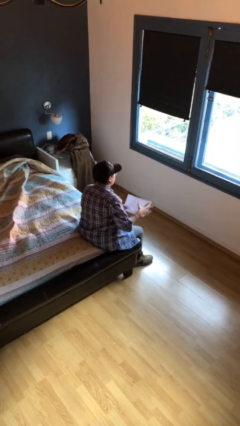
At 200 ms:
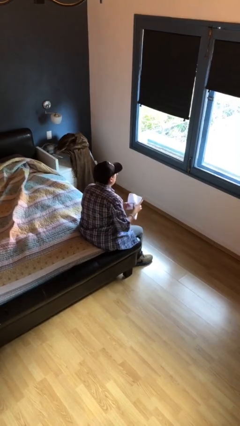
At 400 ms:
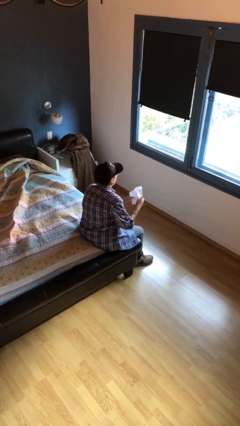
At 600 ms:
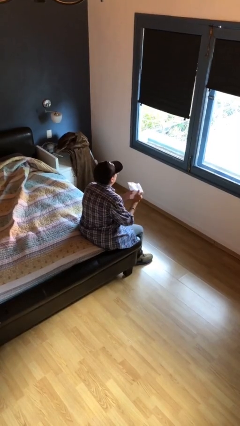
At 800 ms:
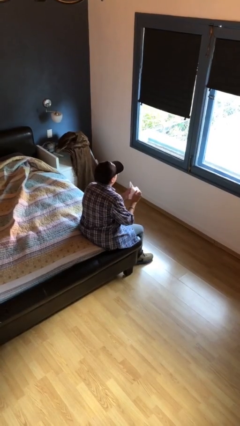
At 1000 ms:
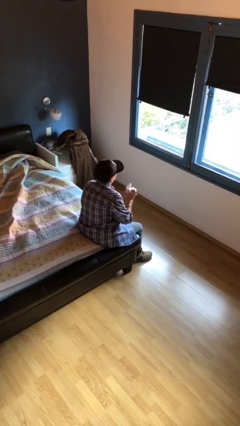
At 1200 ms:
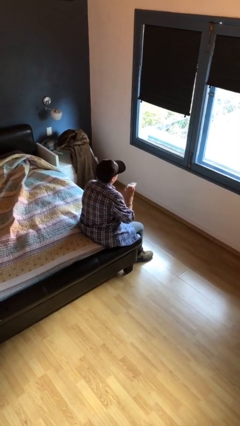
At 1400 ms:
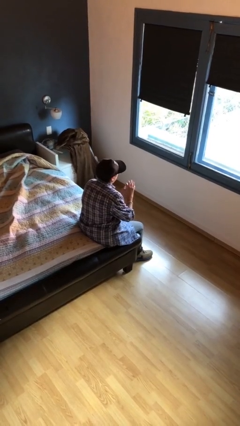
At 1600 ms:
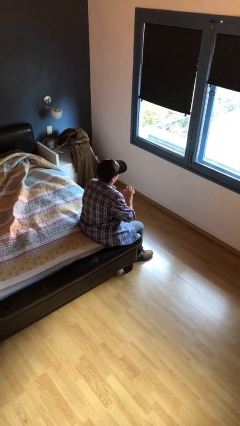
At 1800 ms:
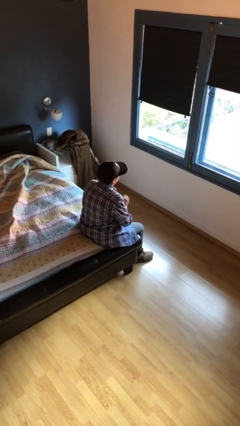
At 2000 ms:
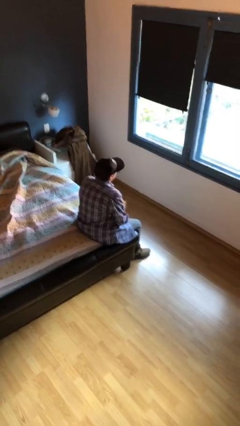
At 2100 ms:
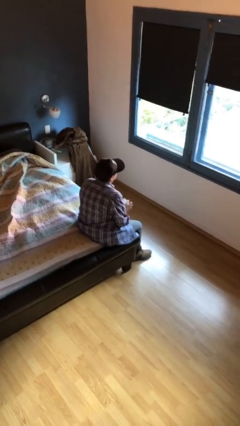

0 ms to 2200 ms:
person crumples paper

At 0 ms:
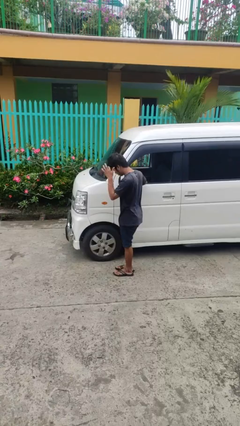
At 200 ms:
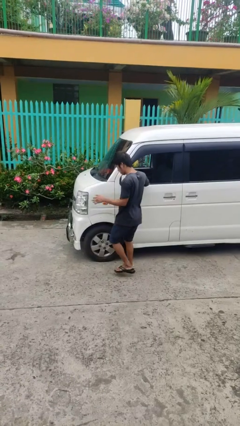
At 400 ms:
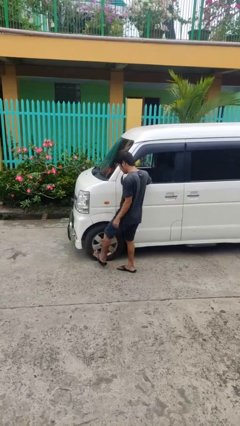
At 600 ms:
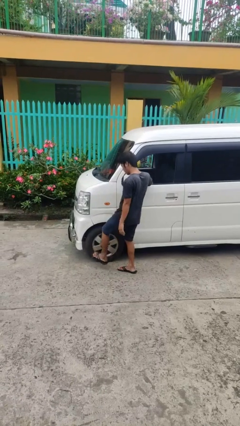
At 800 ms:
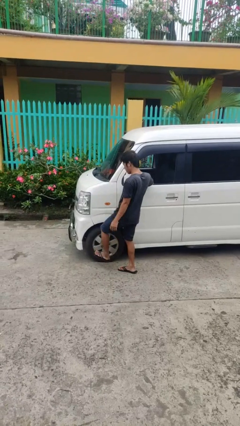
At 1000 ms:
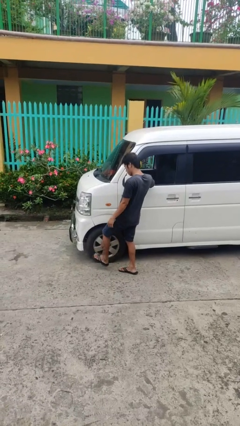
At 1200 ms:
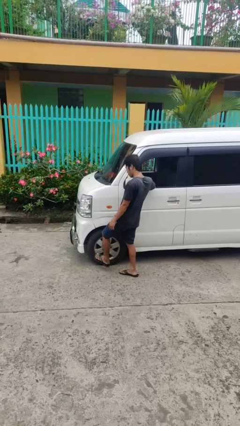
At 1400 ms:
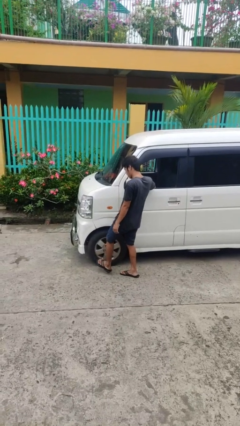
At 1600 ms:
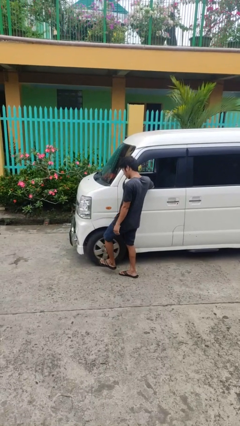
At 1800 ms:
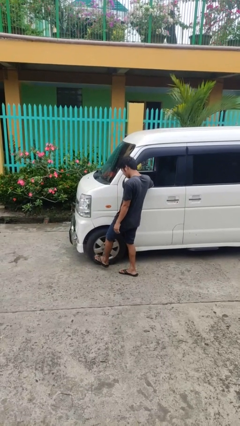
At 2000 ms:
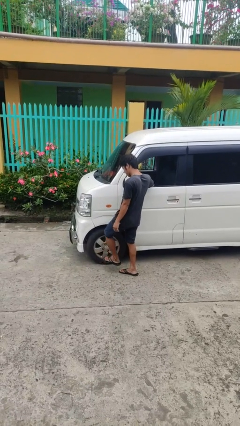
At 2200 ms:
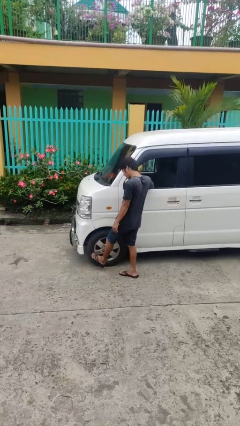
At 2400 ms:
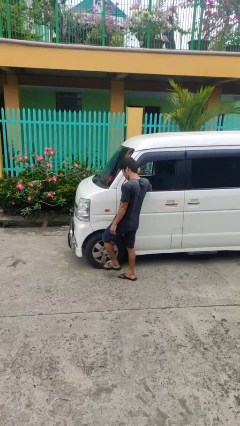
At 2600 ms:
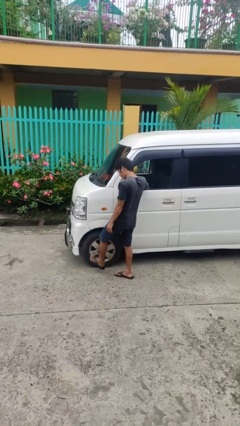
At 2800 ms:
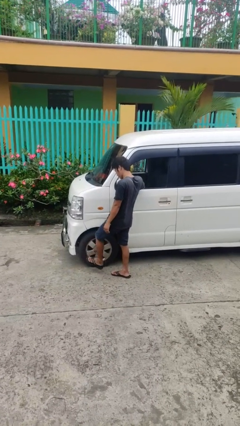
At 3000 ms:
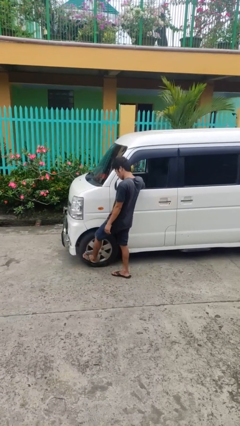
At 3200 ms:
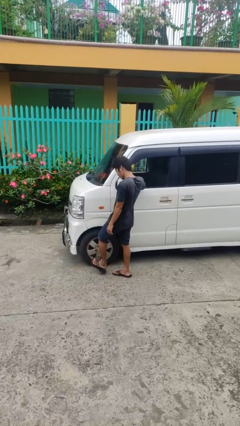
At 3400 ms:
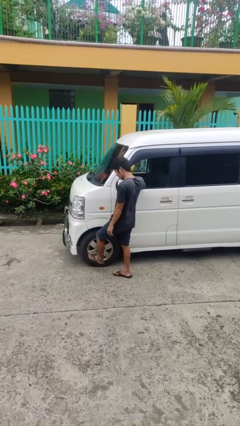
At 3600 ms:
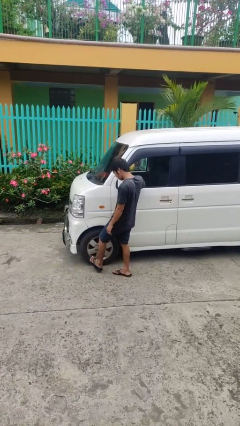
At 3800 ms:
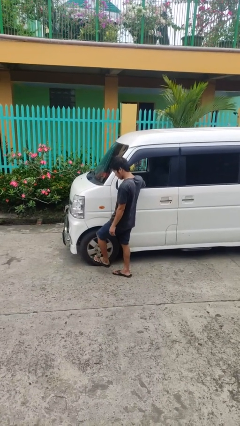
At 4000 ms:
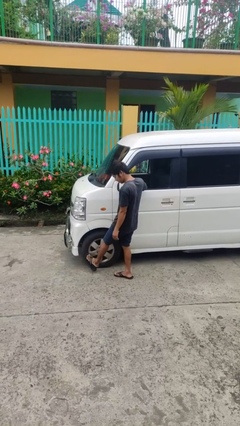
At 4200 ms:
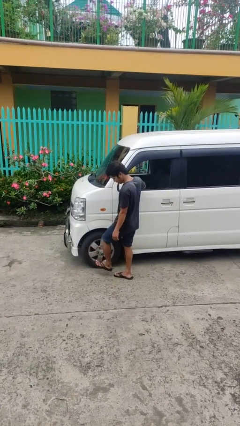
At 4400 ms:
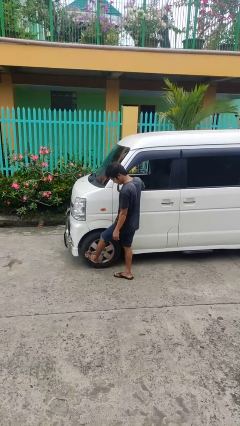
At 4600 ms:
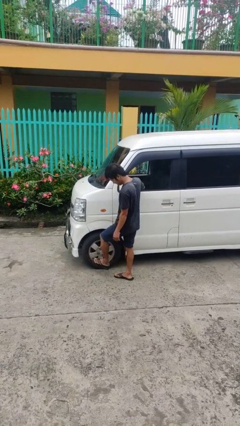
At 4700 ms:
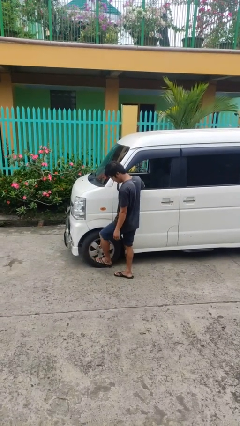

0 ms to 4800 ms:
person kicks car tires

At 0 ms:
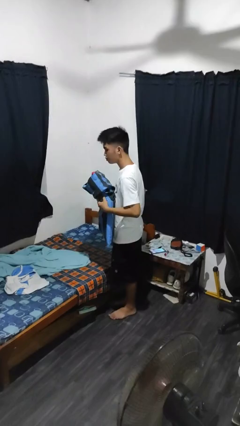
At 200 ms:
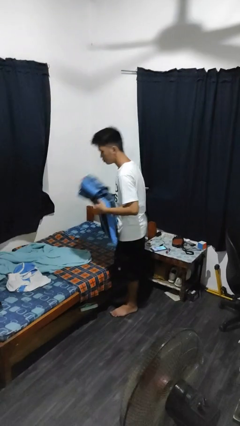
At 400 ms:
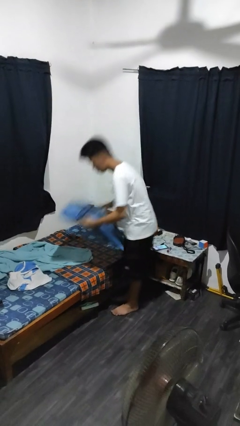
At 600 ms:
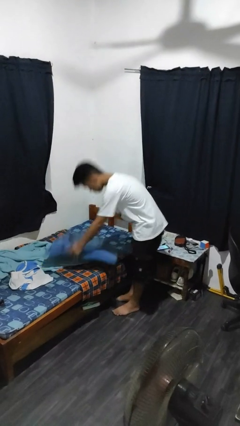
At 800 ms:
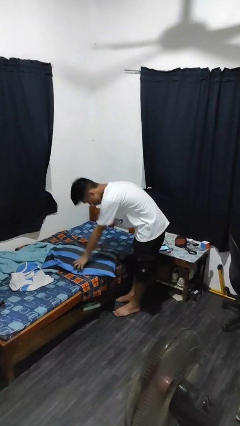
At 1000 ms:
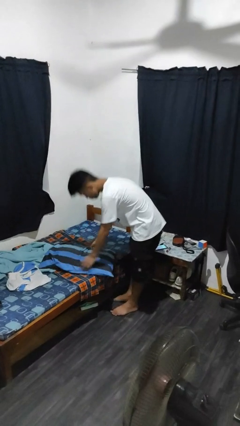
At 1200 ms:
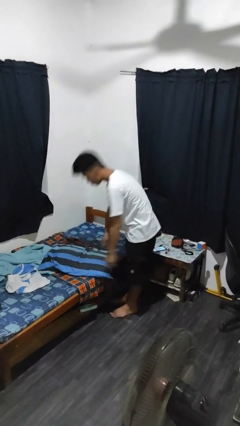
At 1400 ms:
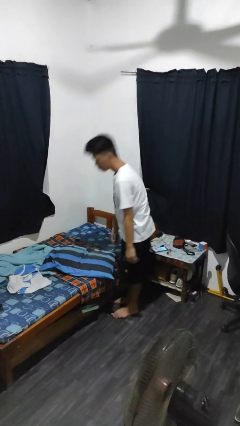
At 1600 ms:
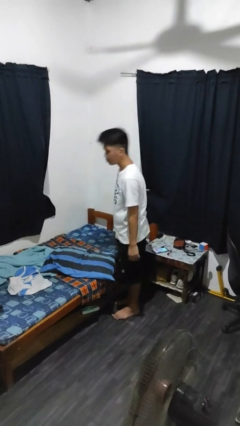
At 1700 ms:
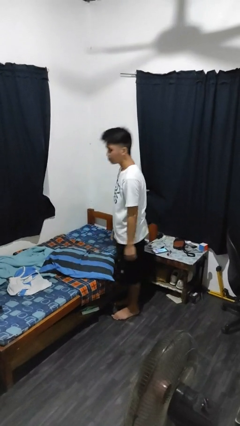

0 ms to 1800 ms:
person puts down object on bed

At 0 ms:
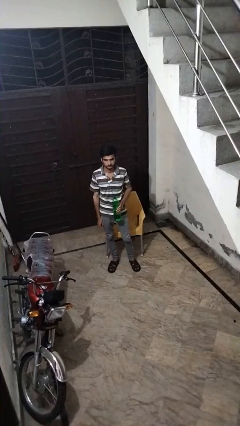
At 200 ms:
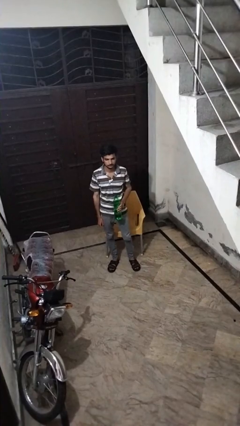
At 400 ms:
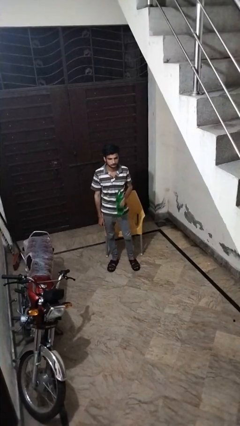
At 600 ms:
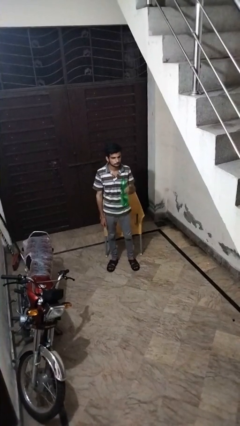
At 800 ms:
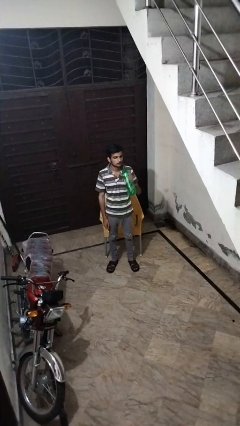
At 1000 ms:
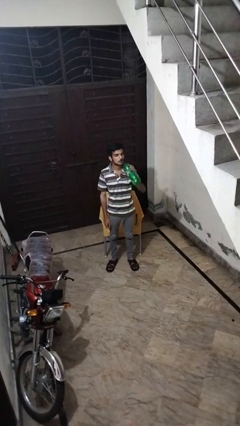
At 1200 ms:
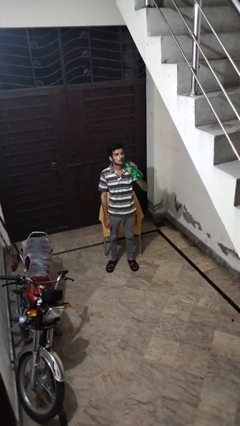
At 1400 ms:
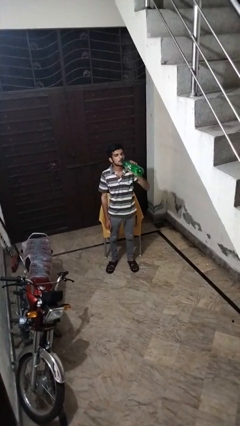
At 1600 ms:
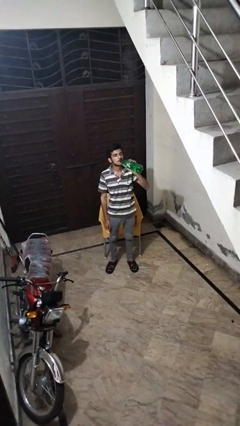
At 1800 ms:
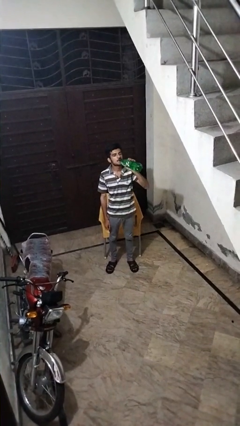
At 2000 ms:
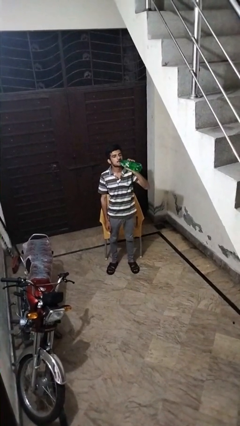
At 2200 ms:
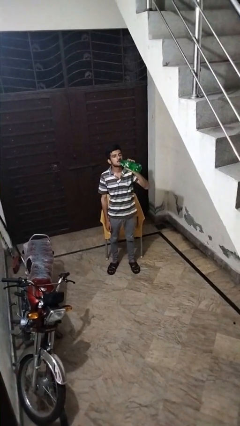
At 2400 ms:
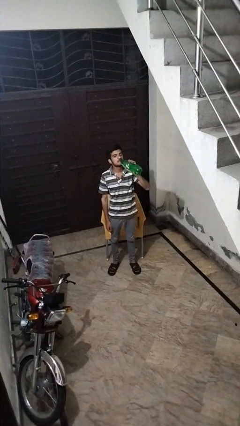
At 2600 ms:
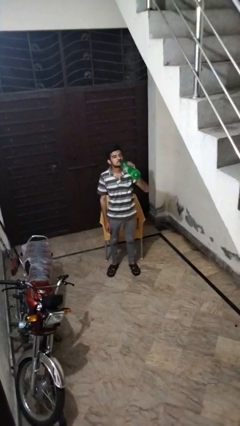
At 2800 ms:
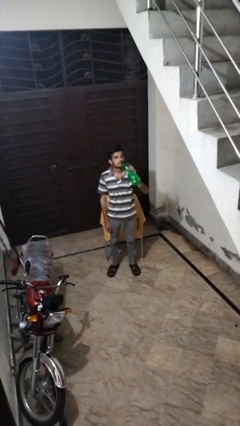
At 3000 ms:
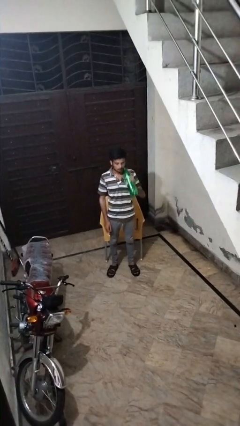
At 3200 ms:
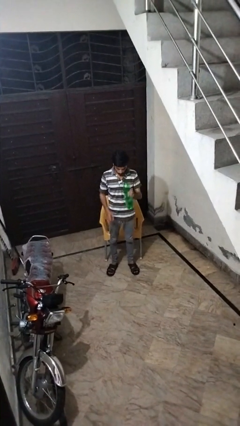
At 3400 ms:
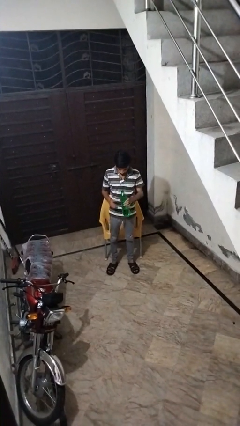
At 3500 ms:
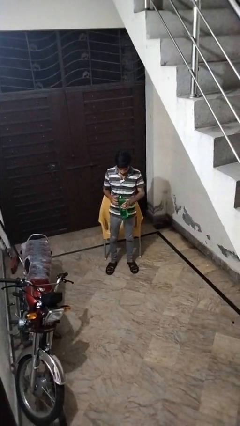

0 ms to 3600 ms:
person drinks from bottle

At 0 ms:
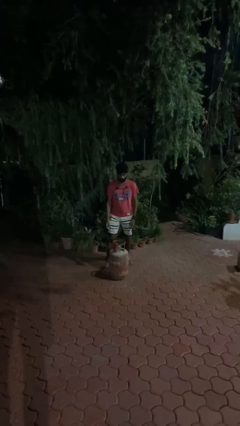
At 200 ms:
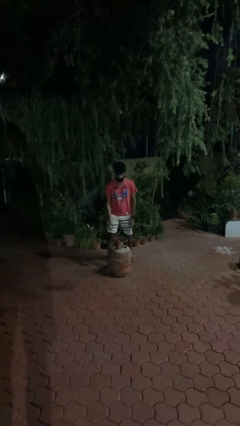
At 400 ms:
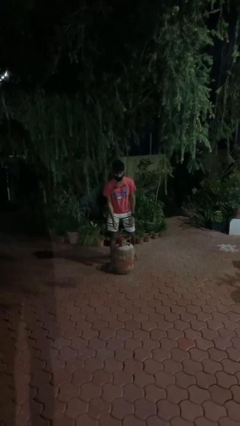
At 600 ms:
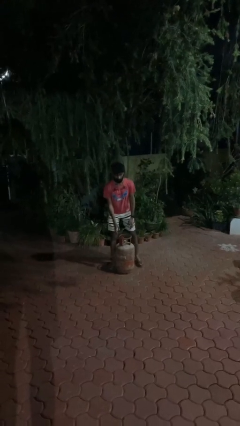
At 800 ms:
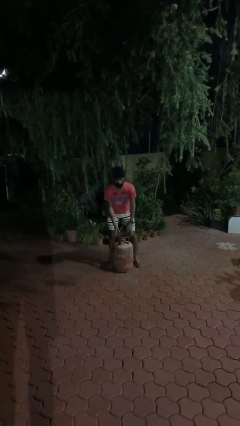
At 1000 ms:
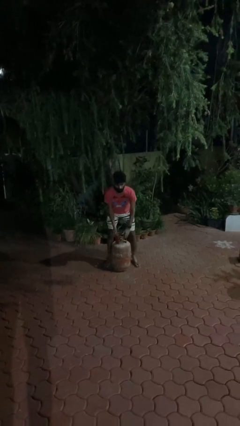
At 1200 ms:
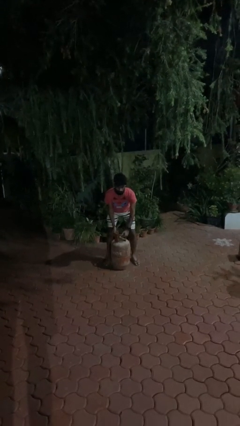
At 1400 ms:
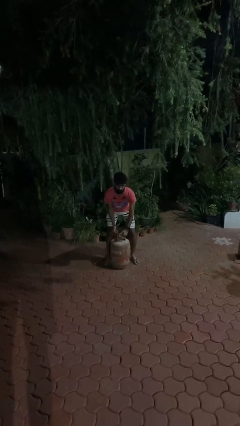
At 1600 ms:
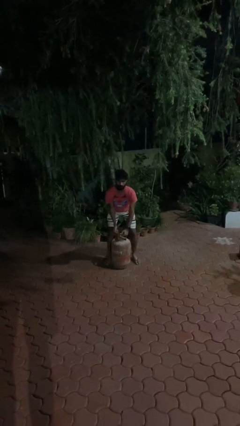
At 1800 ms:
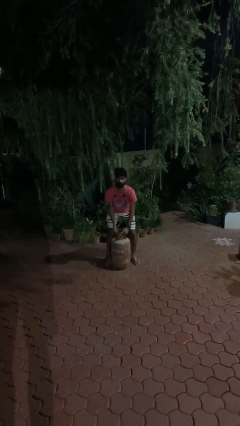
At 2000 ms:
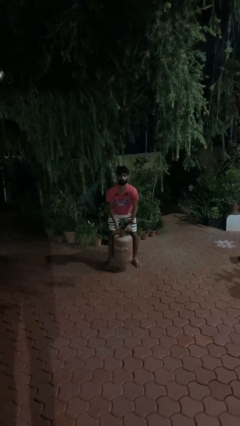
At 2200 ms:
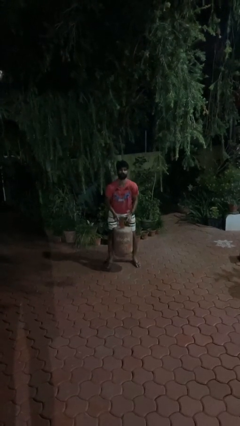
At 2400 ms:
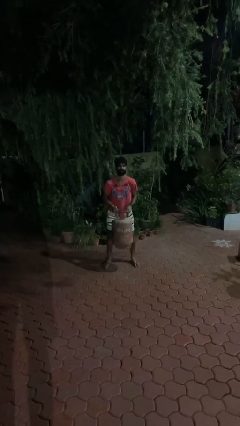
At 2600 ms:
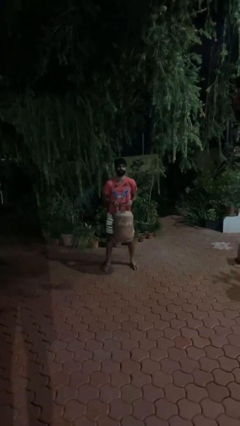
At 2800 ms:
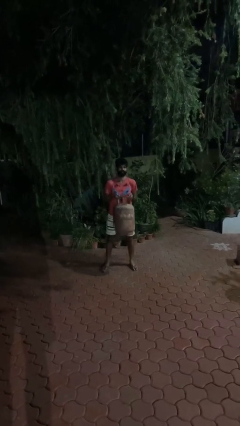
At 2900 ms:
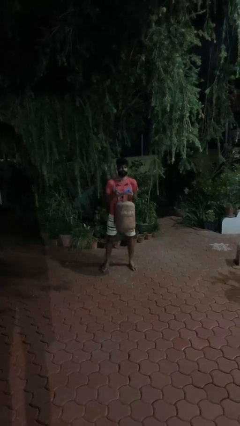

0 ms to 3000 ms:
person picks up object from floor

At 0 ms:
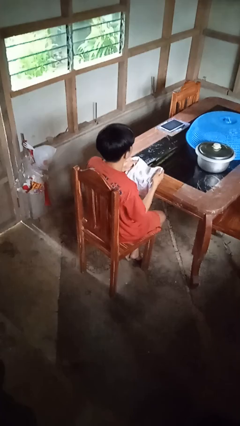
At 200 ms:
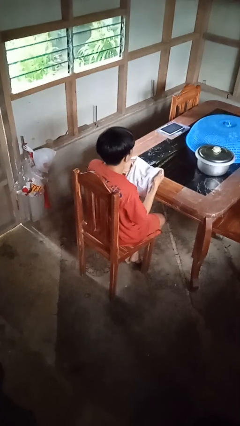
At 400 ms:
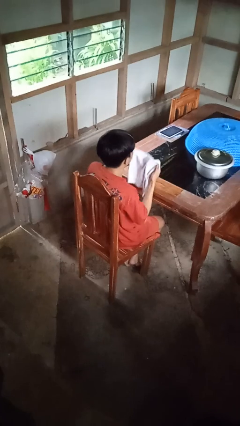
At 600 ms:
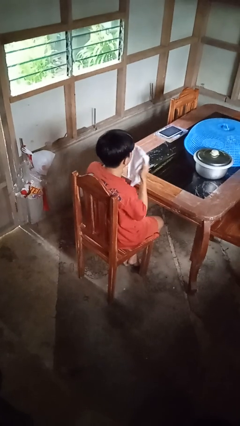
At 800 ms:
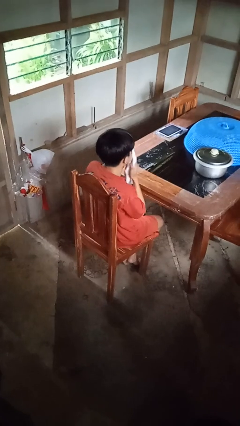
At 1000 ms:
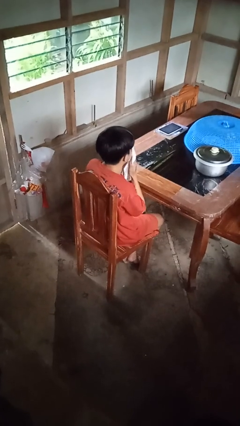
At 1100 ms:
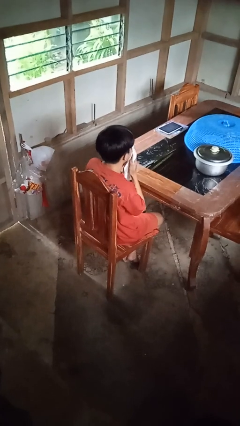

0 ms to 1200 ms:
person wipes mouth with napkin

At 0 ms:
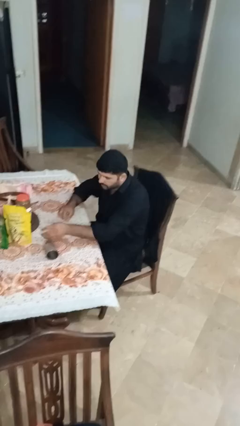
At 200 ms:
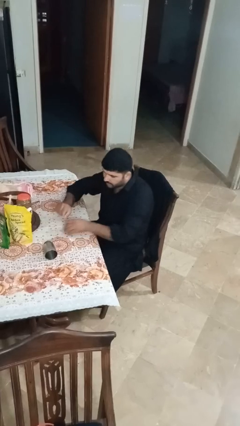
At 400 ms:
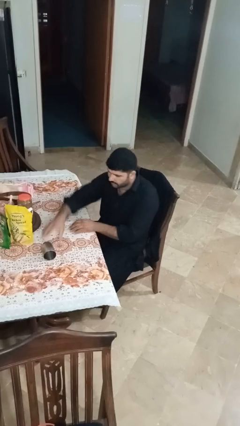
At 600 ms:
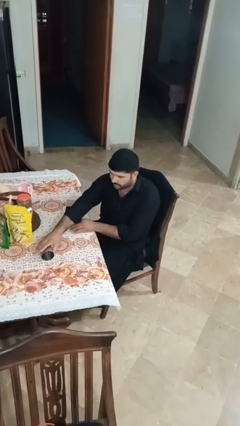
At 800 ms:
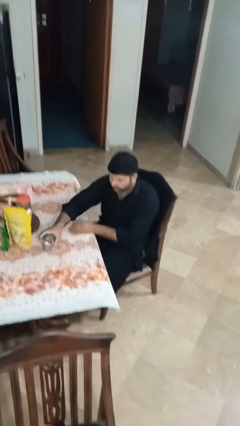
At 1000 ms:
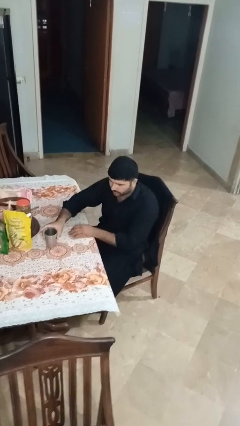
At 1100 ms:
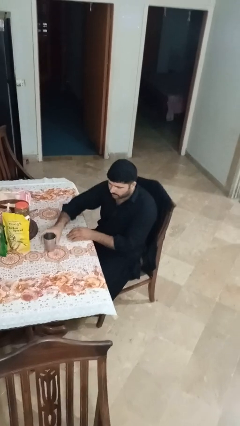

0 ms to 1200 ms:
person sets upright glass
